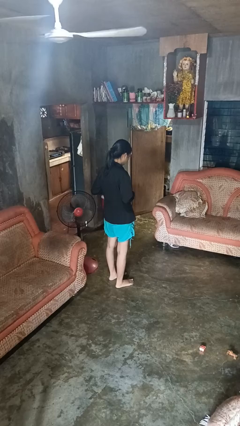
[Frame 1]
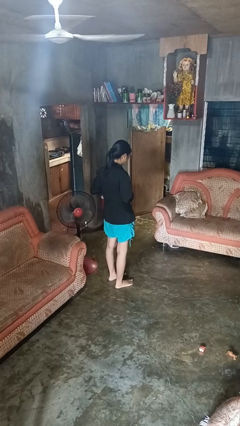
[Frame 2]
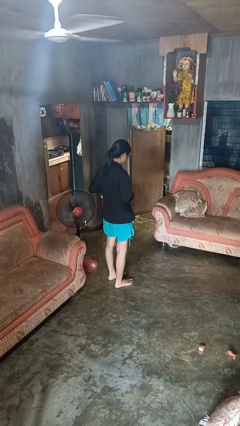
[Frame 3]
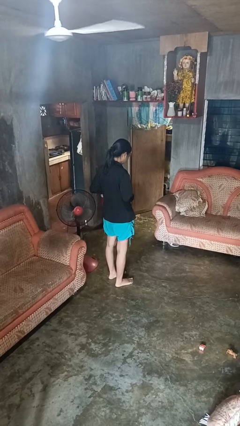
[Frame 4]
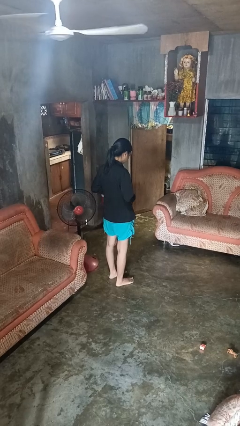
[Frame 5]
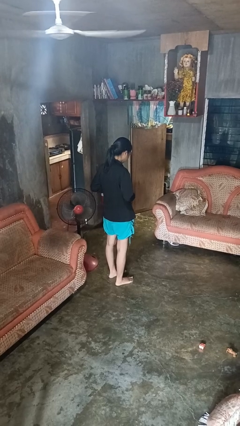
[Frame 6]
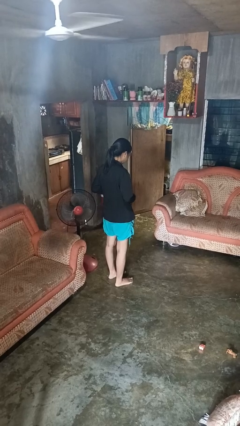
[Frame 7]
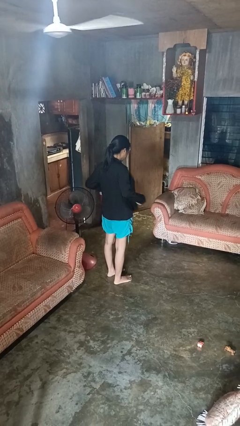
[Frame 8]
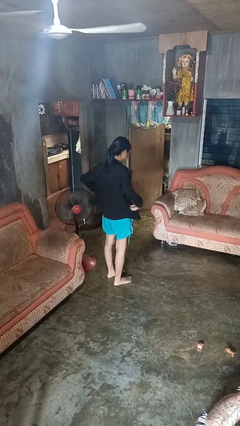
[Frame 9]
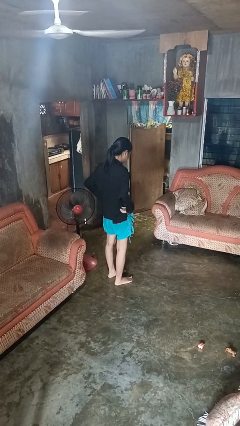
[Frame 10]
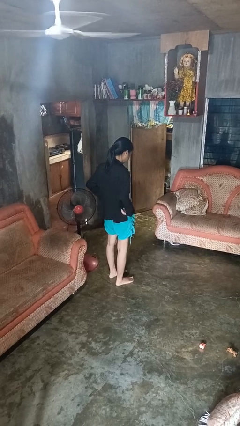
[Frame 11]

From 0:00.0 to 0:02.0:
person unbuttons shirt

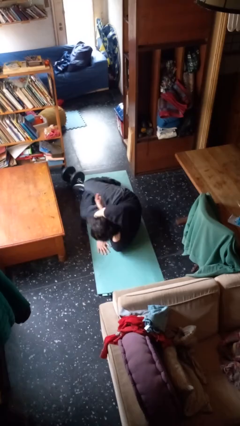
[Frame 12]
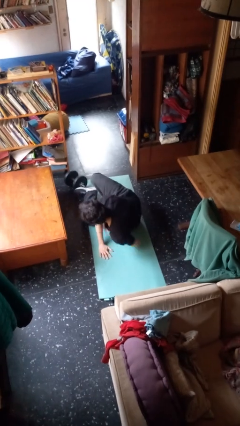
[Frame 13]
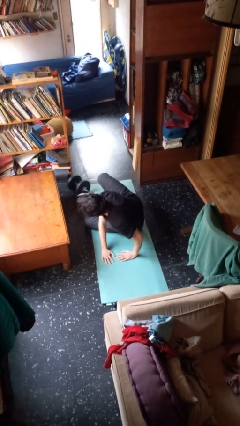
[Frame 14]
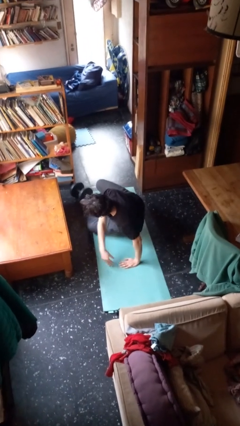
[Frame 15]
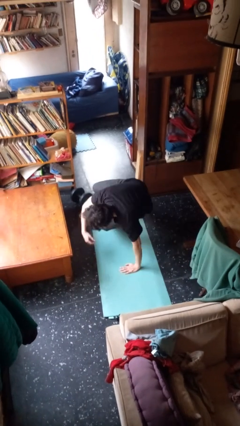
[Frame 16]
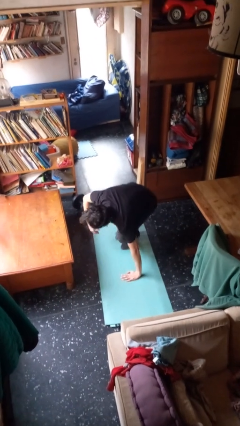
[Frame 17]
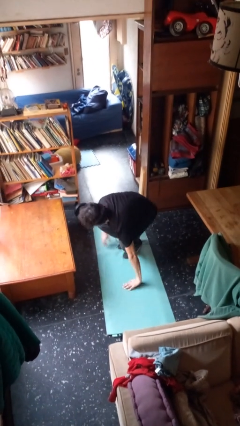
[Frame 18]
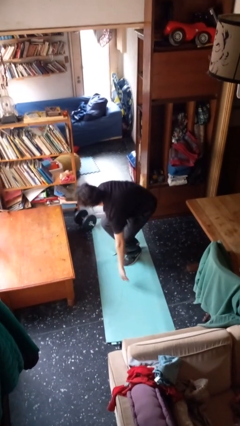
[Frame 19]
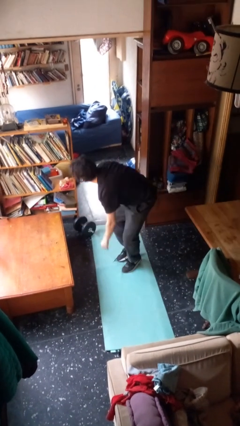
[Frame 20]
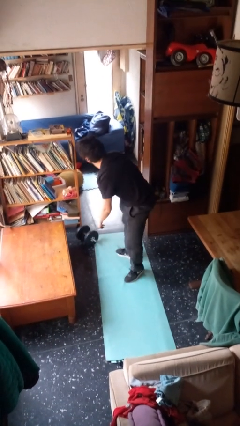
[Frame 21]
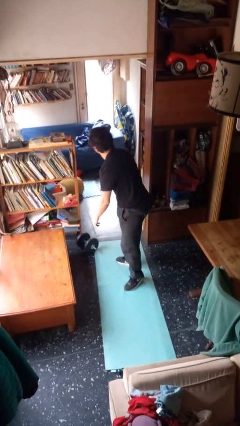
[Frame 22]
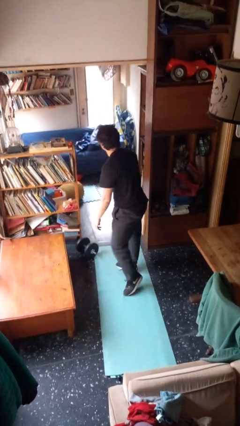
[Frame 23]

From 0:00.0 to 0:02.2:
person stands up from floor

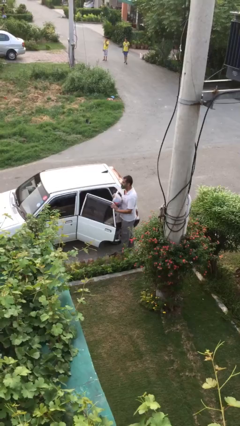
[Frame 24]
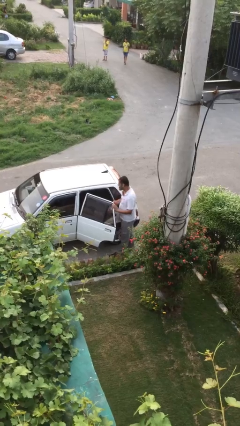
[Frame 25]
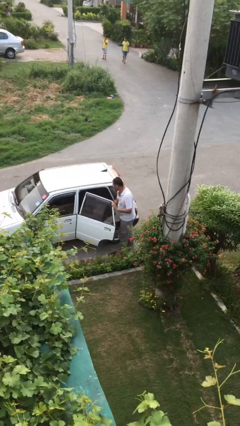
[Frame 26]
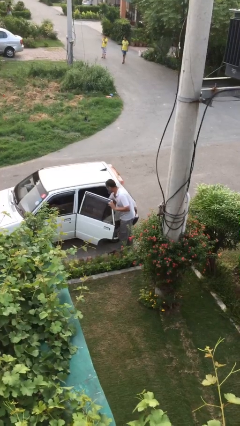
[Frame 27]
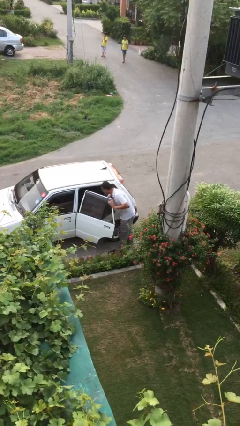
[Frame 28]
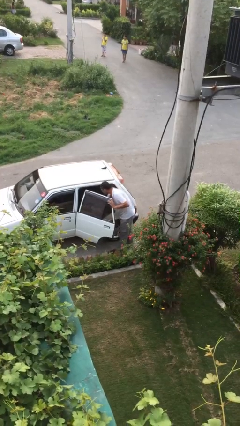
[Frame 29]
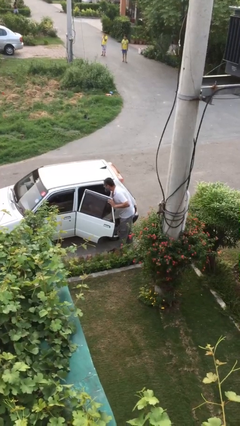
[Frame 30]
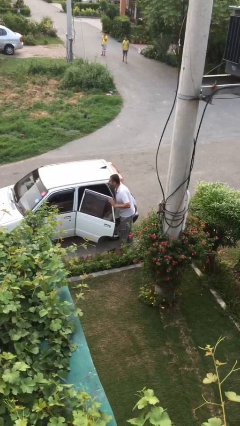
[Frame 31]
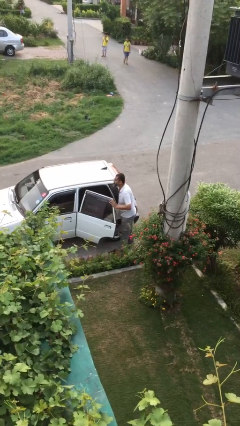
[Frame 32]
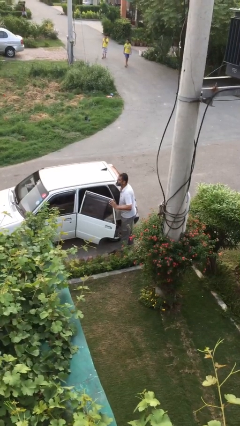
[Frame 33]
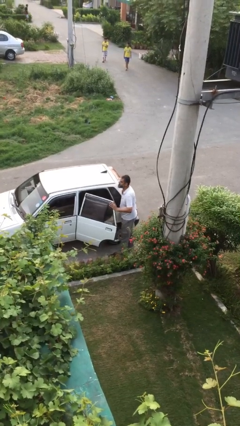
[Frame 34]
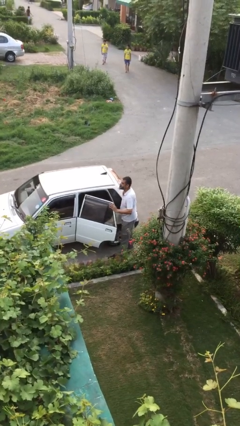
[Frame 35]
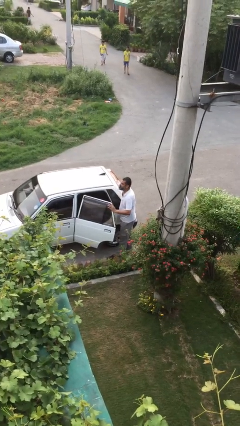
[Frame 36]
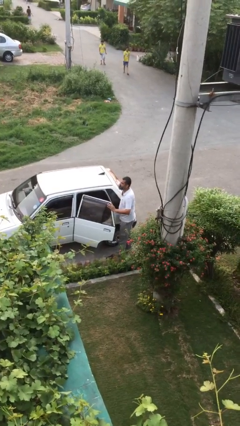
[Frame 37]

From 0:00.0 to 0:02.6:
person loads car

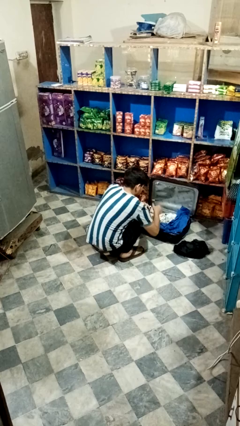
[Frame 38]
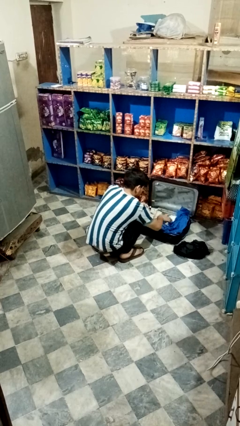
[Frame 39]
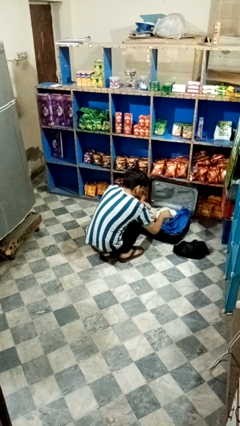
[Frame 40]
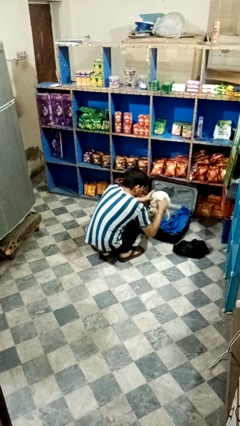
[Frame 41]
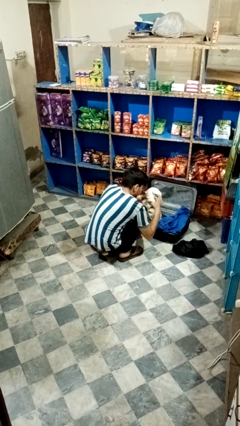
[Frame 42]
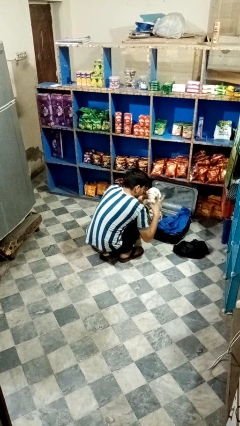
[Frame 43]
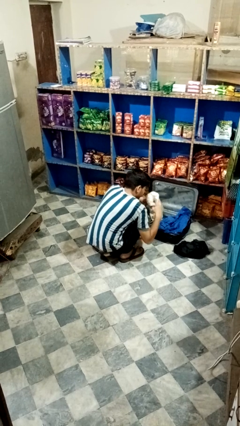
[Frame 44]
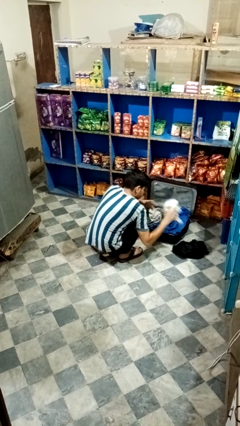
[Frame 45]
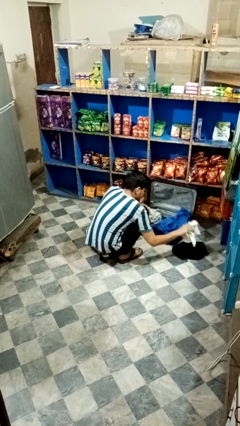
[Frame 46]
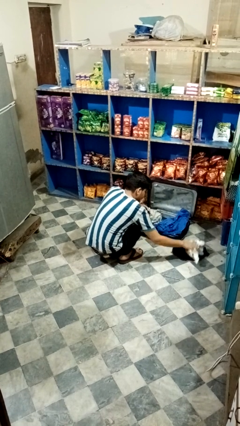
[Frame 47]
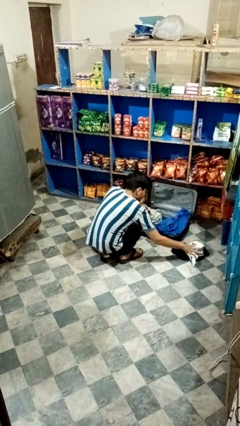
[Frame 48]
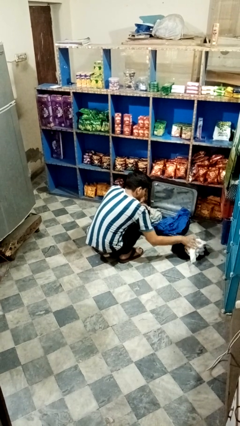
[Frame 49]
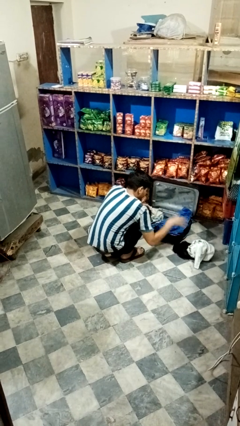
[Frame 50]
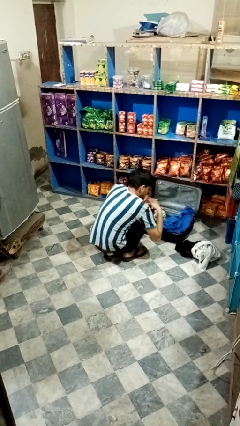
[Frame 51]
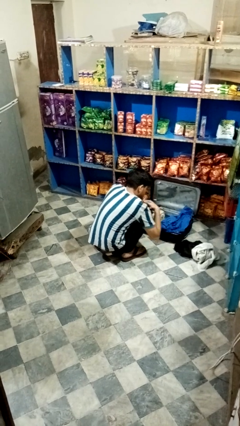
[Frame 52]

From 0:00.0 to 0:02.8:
person unloads clothes from suitcase

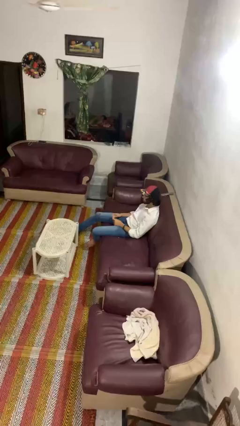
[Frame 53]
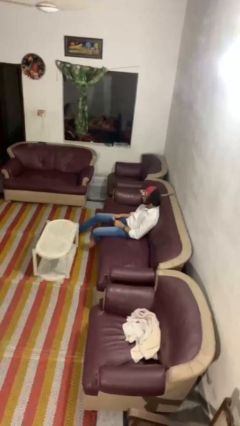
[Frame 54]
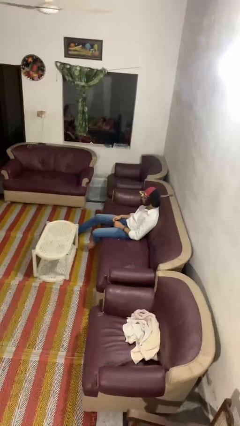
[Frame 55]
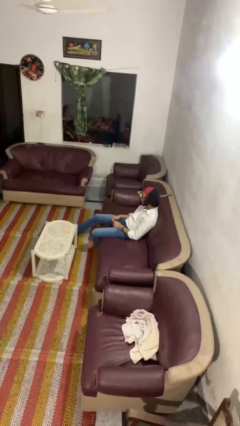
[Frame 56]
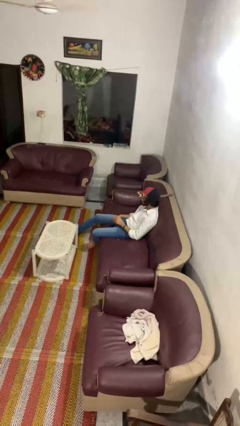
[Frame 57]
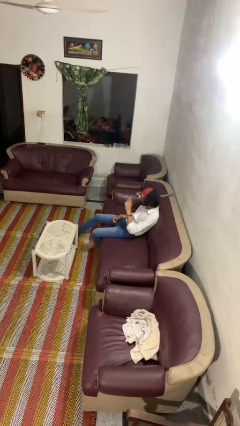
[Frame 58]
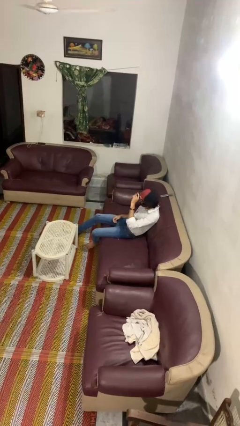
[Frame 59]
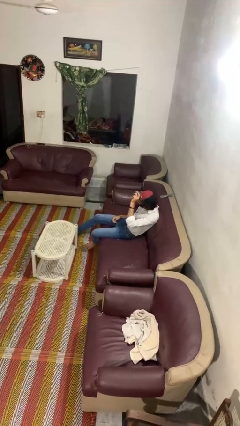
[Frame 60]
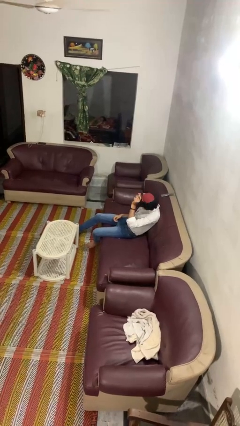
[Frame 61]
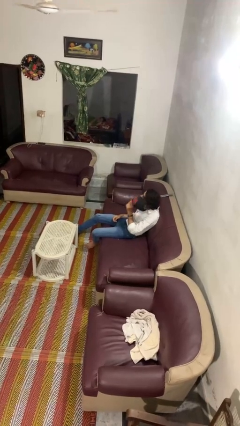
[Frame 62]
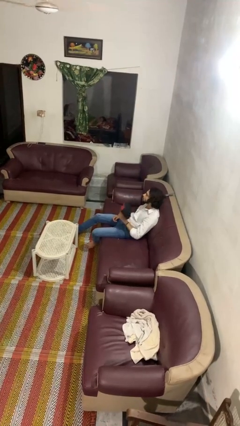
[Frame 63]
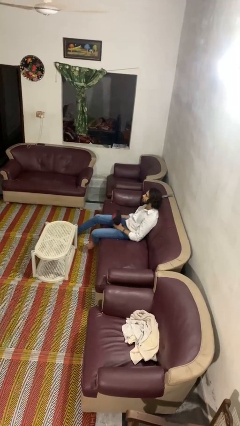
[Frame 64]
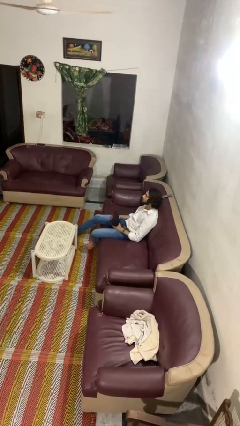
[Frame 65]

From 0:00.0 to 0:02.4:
person takes off hat

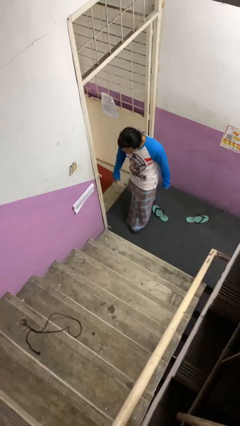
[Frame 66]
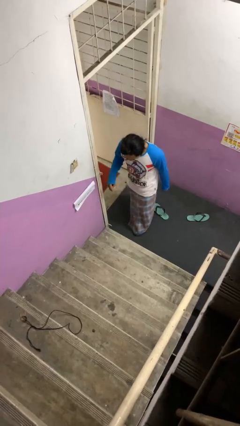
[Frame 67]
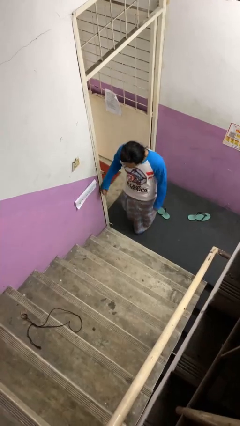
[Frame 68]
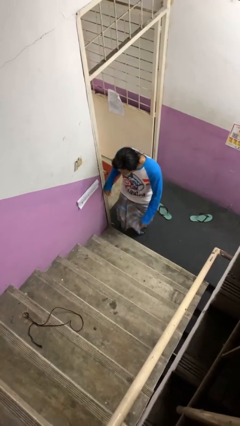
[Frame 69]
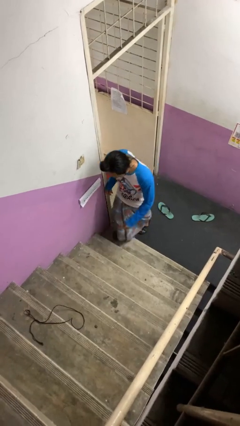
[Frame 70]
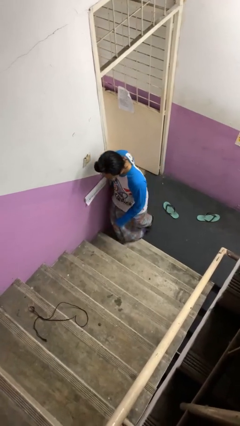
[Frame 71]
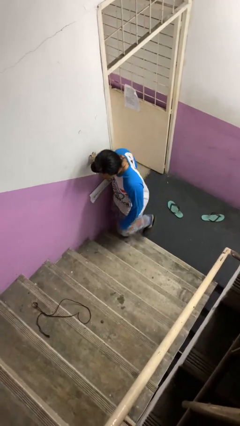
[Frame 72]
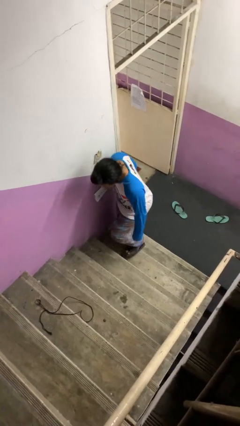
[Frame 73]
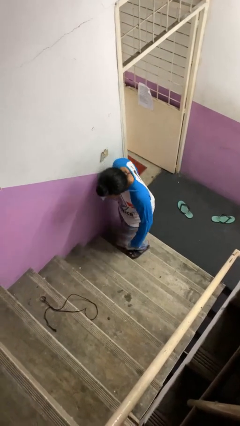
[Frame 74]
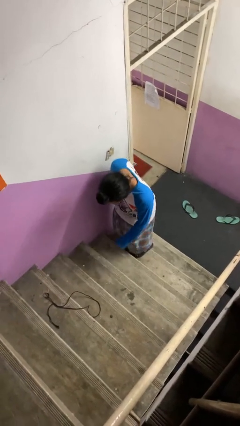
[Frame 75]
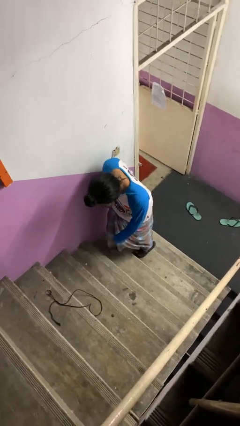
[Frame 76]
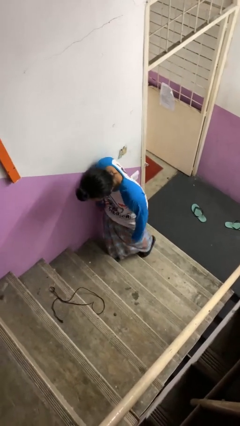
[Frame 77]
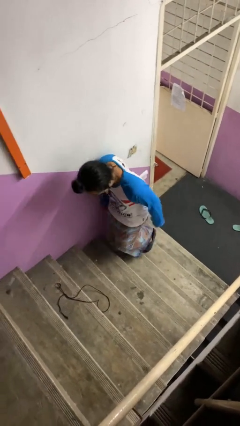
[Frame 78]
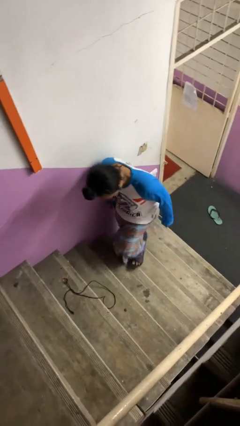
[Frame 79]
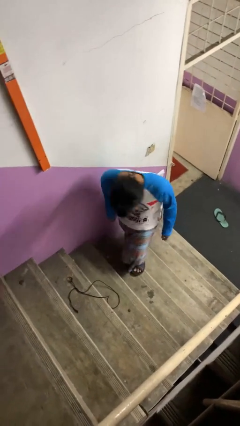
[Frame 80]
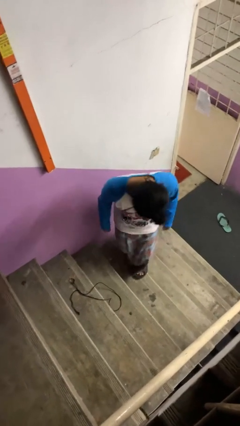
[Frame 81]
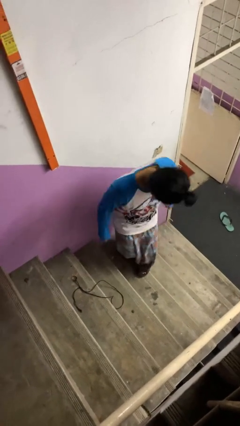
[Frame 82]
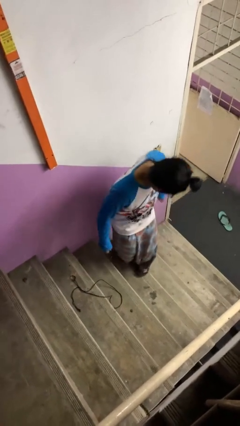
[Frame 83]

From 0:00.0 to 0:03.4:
person climbs up stairs

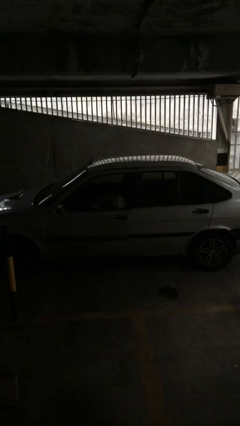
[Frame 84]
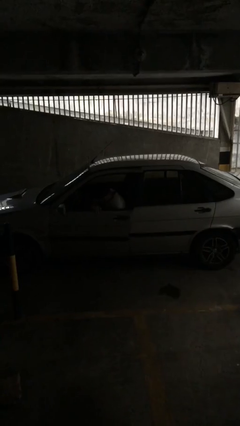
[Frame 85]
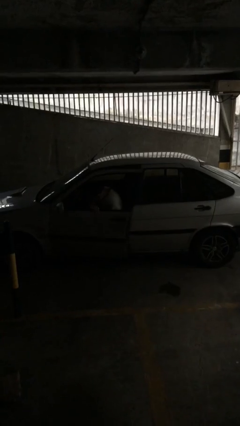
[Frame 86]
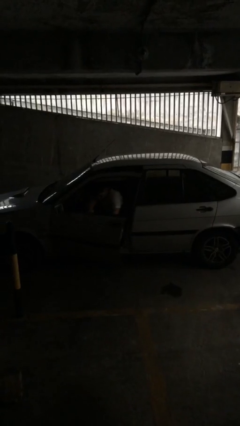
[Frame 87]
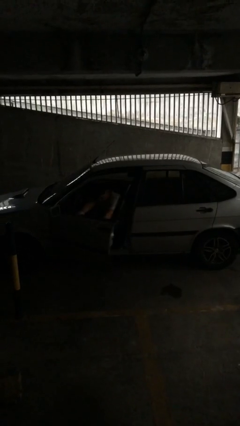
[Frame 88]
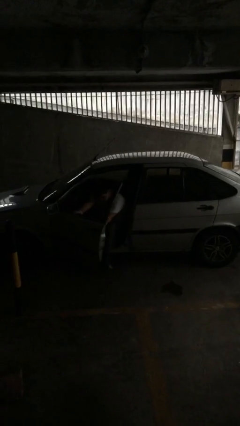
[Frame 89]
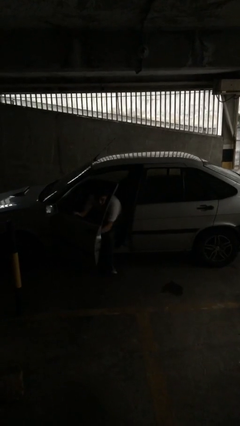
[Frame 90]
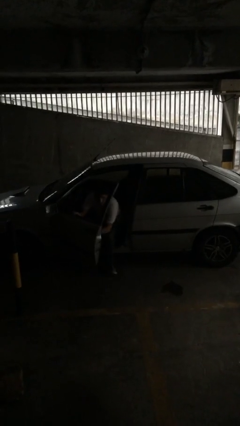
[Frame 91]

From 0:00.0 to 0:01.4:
person opens car door
